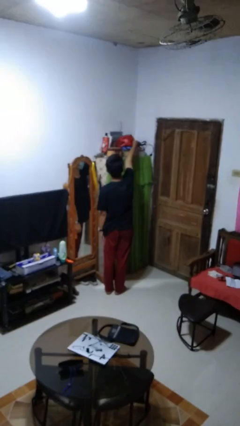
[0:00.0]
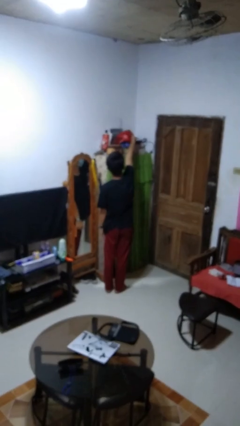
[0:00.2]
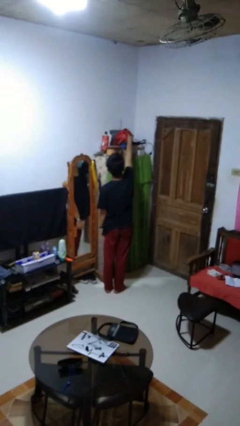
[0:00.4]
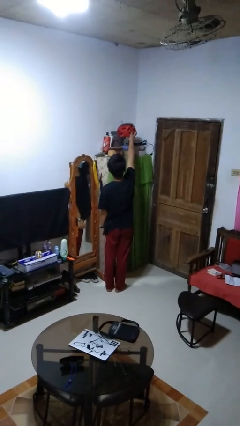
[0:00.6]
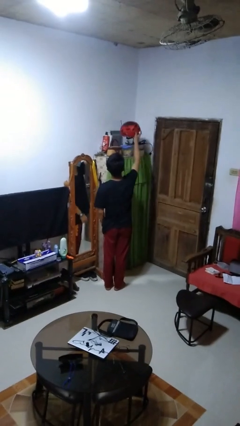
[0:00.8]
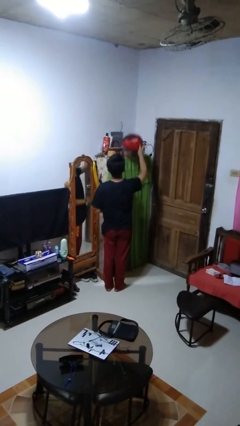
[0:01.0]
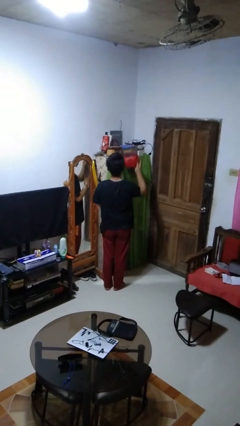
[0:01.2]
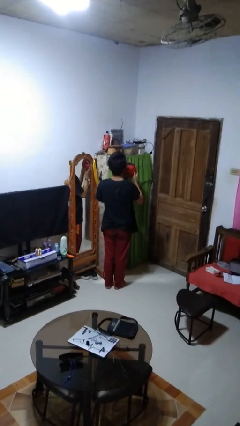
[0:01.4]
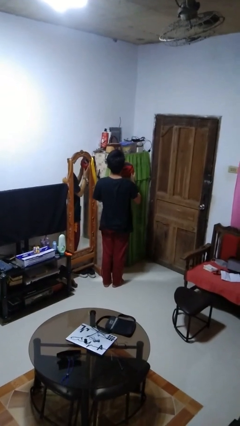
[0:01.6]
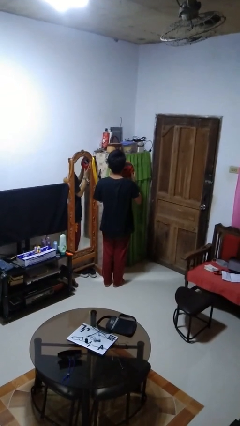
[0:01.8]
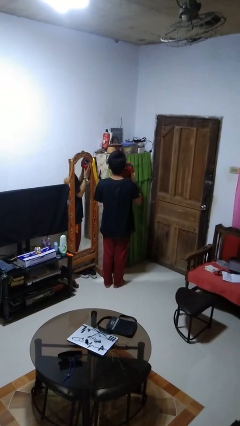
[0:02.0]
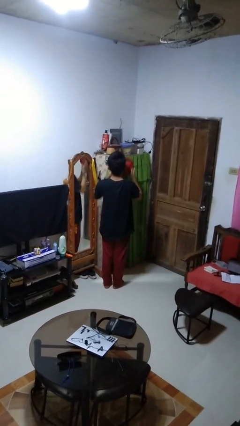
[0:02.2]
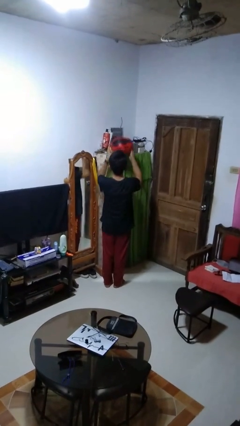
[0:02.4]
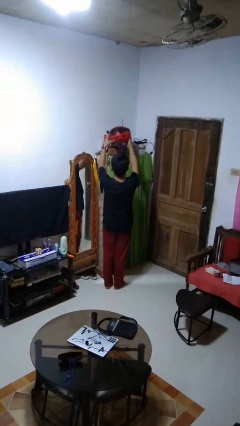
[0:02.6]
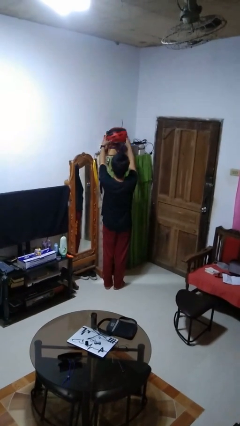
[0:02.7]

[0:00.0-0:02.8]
person picks up object from shelf

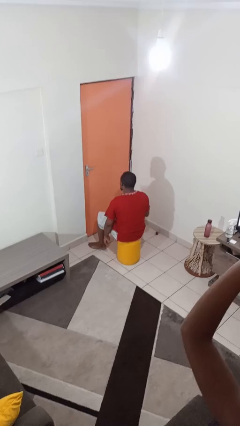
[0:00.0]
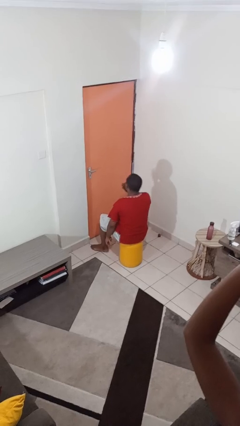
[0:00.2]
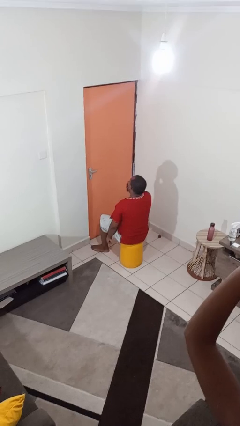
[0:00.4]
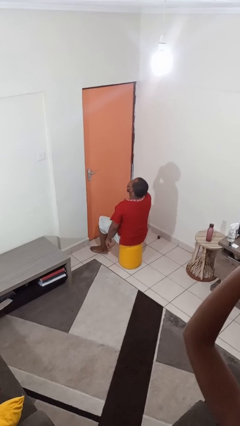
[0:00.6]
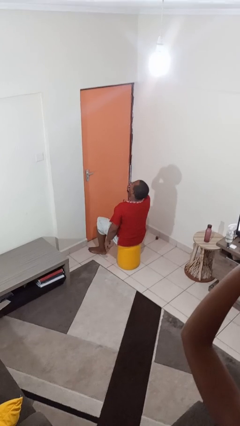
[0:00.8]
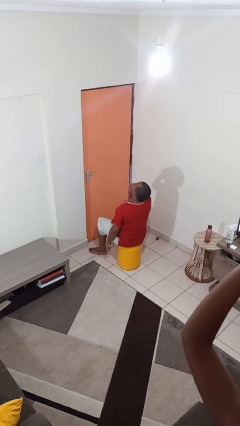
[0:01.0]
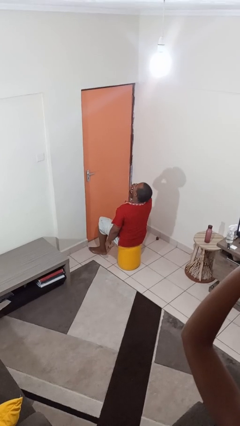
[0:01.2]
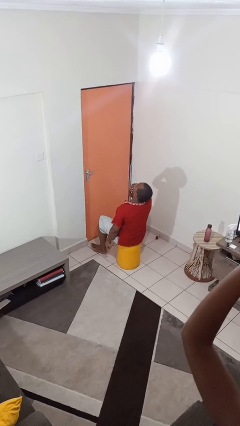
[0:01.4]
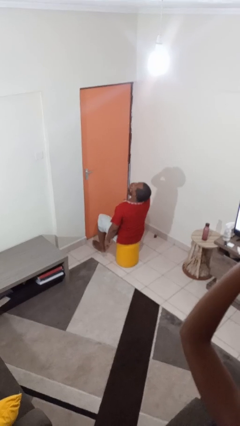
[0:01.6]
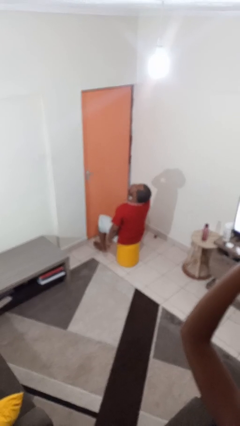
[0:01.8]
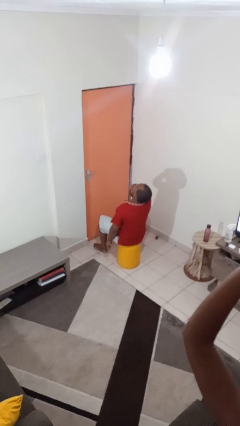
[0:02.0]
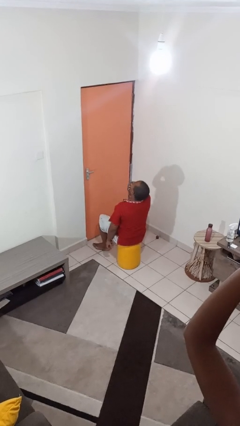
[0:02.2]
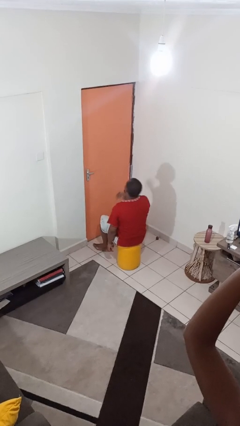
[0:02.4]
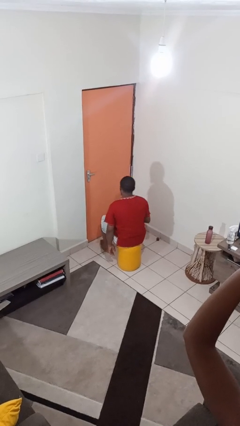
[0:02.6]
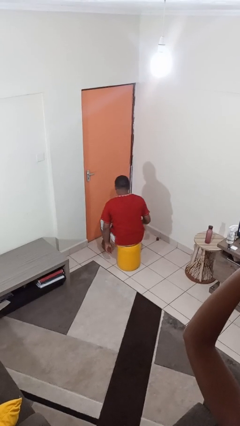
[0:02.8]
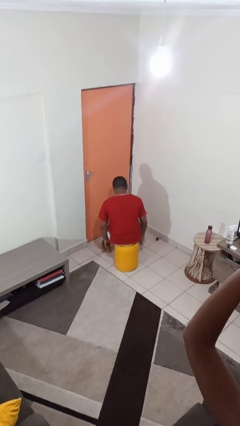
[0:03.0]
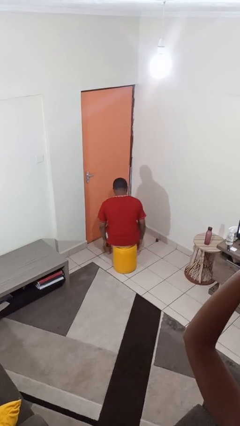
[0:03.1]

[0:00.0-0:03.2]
person yawns

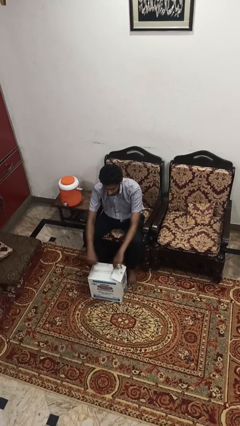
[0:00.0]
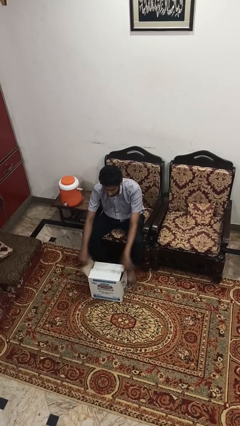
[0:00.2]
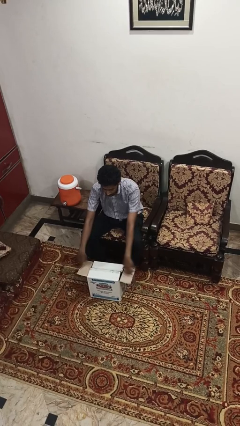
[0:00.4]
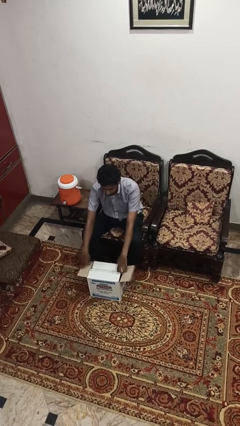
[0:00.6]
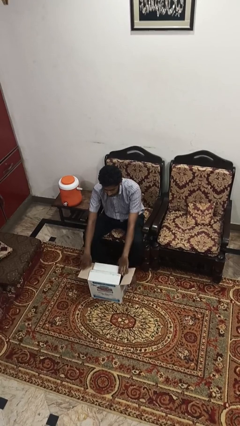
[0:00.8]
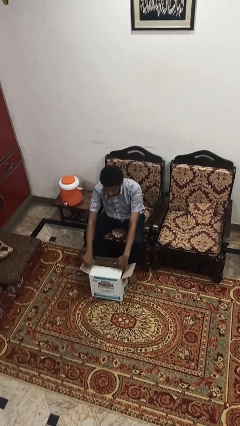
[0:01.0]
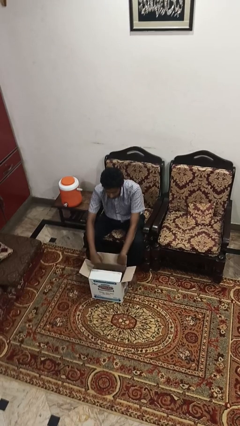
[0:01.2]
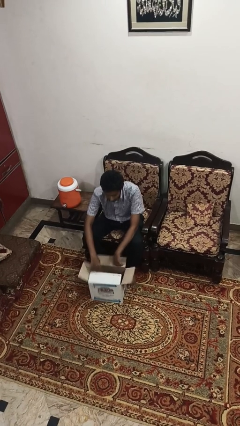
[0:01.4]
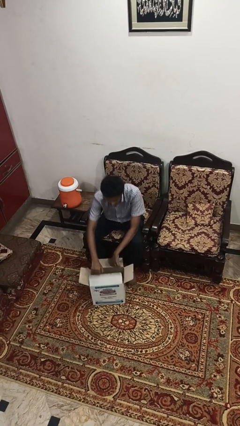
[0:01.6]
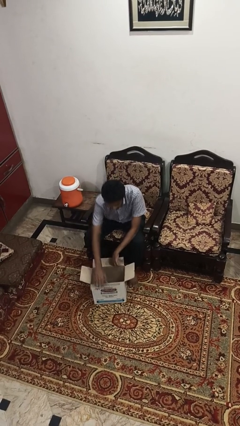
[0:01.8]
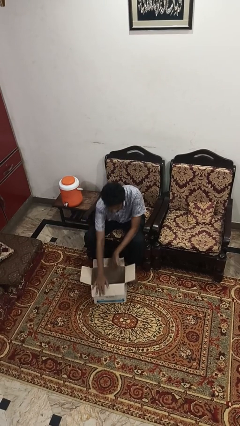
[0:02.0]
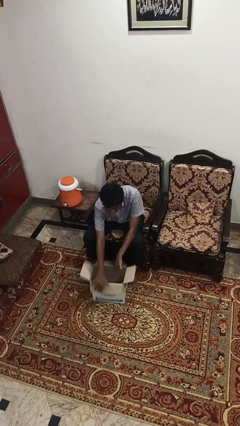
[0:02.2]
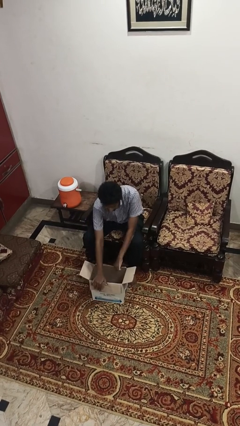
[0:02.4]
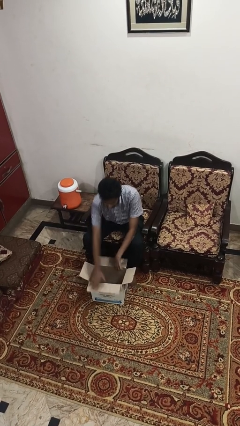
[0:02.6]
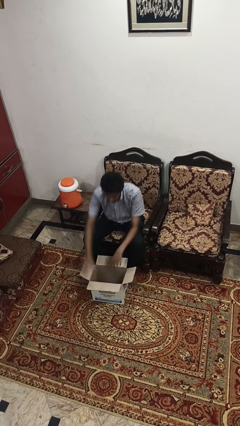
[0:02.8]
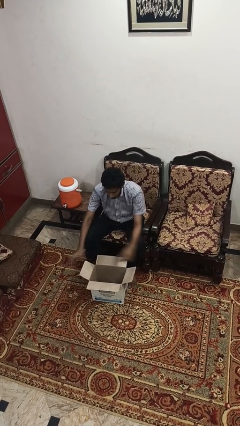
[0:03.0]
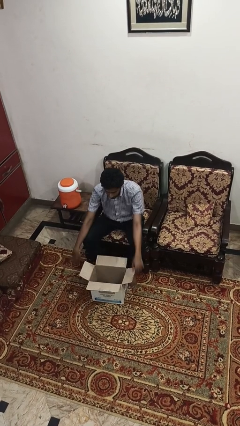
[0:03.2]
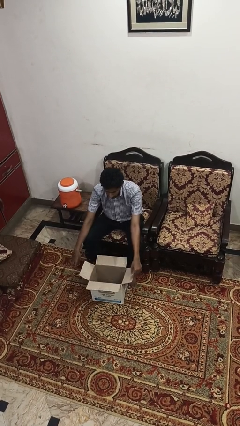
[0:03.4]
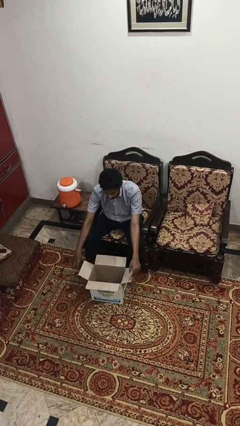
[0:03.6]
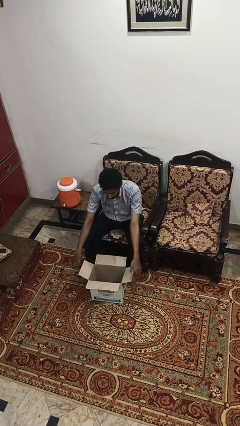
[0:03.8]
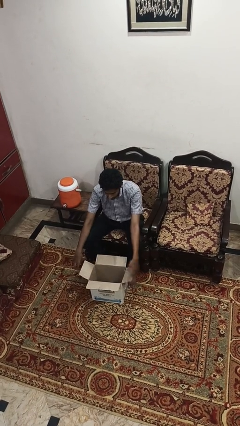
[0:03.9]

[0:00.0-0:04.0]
person opens box

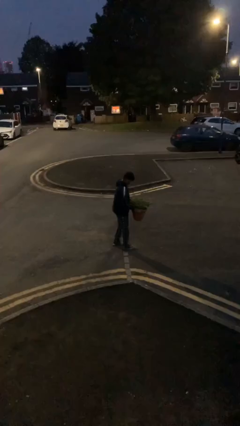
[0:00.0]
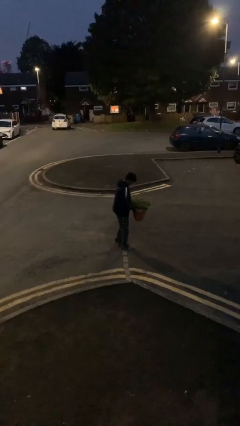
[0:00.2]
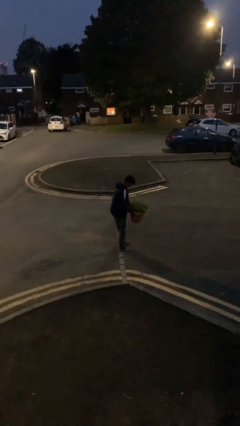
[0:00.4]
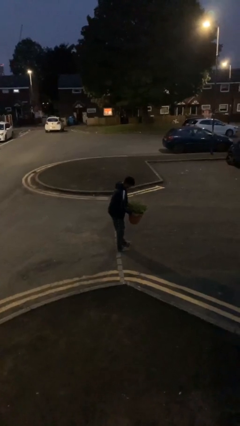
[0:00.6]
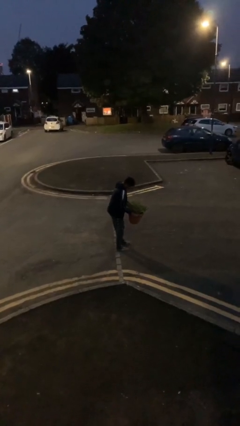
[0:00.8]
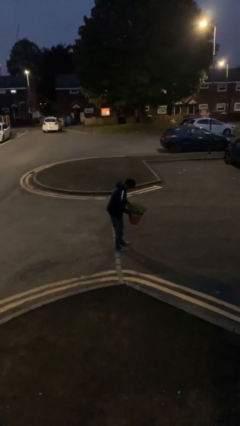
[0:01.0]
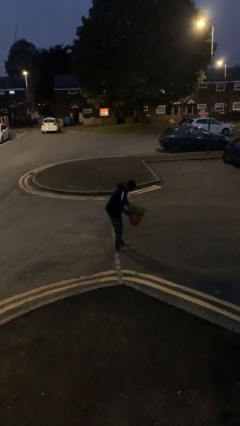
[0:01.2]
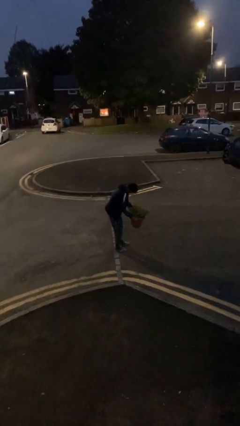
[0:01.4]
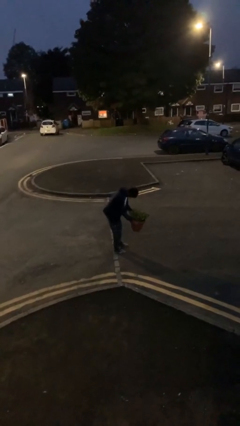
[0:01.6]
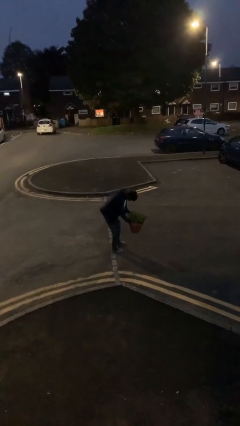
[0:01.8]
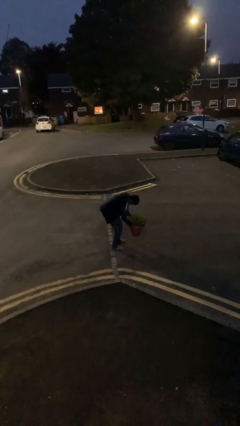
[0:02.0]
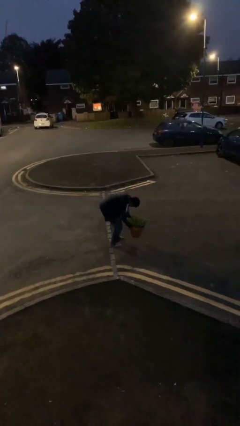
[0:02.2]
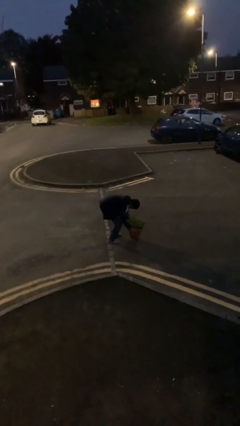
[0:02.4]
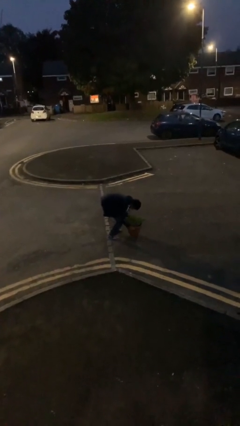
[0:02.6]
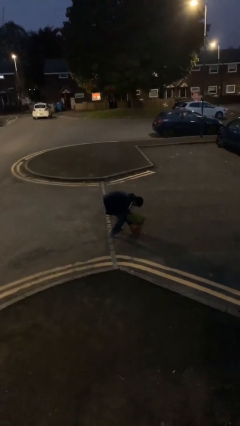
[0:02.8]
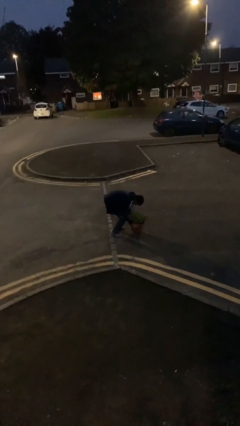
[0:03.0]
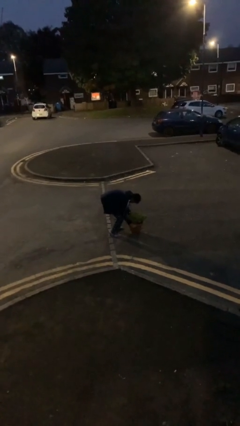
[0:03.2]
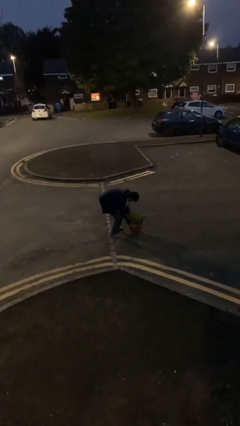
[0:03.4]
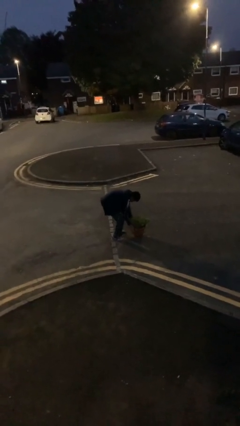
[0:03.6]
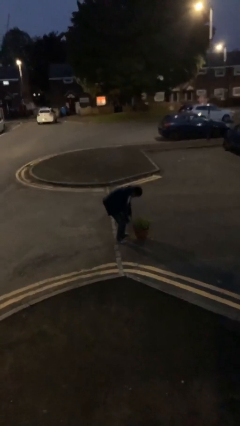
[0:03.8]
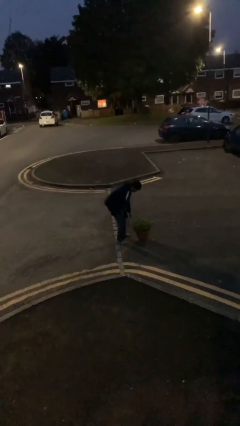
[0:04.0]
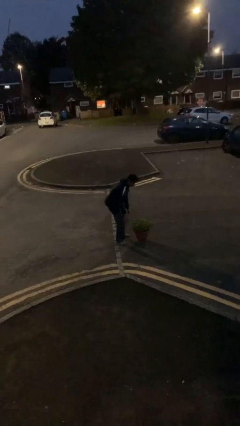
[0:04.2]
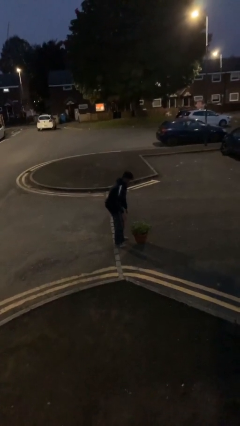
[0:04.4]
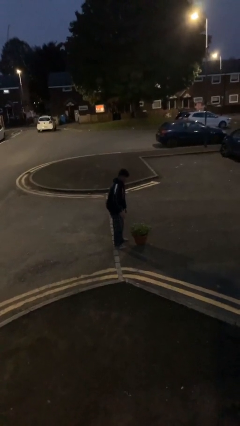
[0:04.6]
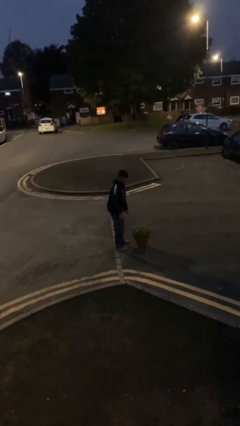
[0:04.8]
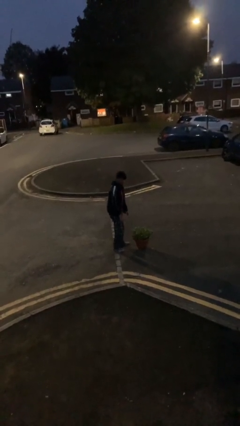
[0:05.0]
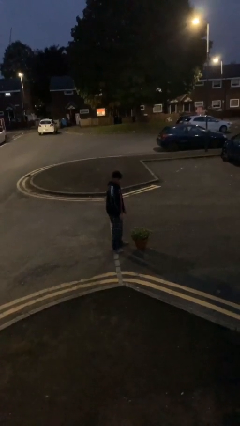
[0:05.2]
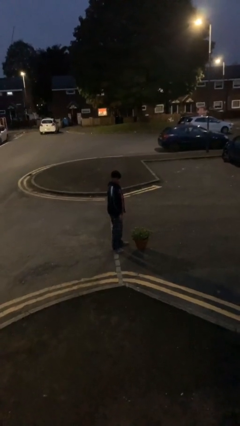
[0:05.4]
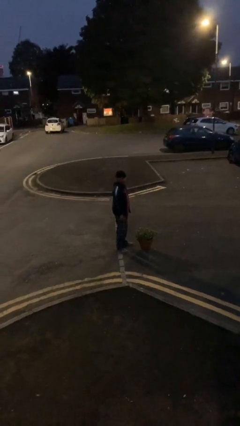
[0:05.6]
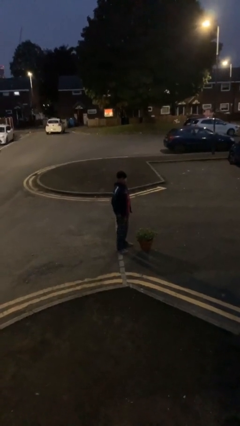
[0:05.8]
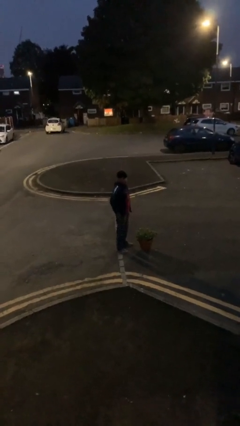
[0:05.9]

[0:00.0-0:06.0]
person puts down object on floor

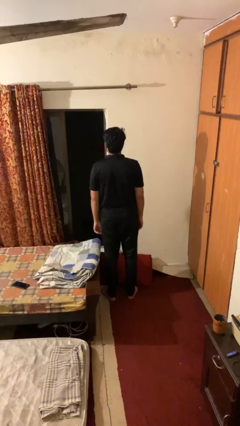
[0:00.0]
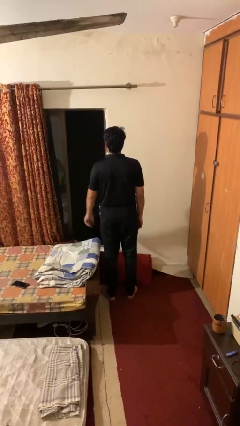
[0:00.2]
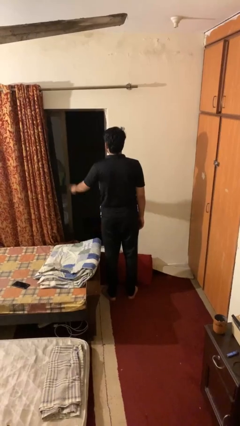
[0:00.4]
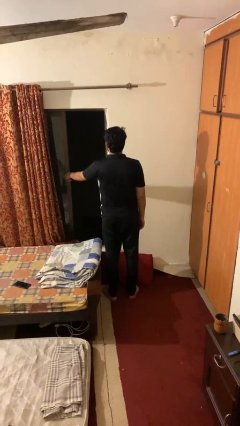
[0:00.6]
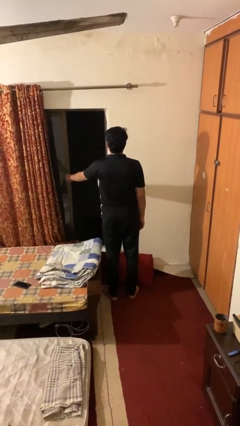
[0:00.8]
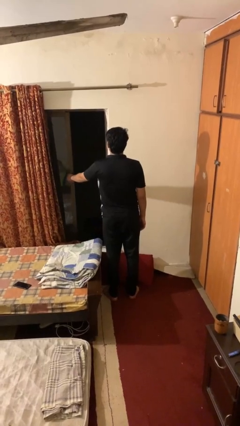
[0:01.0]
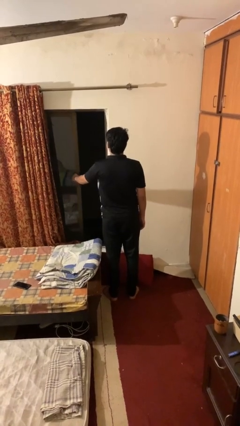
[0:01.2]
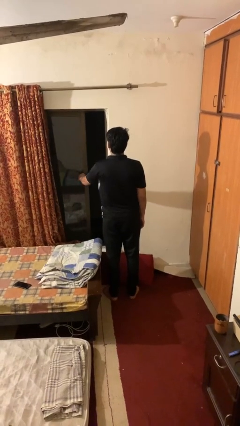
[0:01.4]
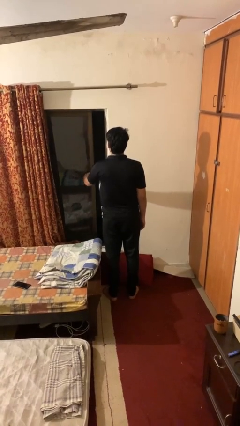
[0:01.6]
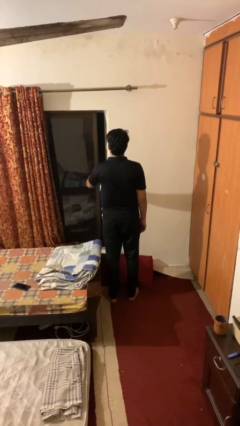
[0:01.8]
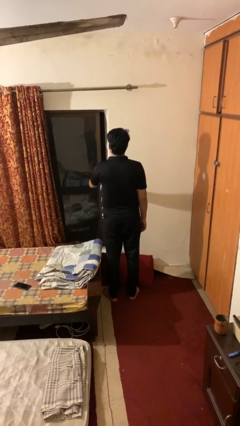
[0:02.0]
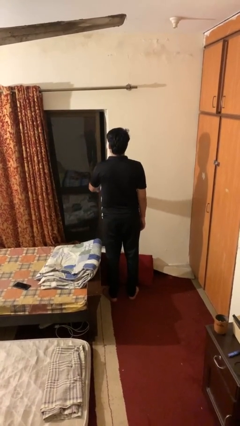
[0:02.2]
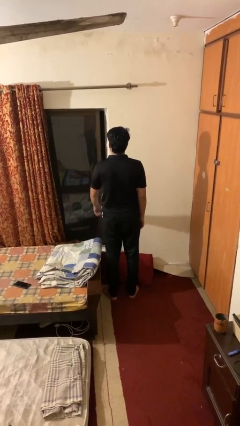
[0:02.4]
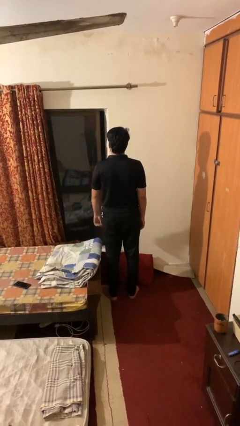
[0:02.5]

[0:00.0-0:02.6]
person closes home window
